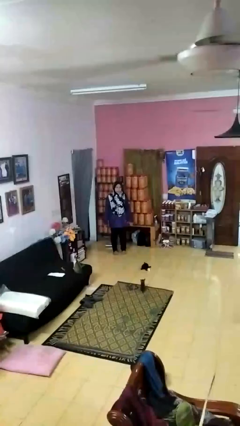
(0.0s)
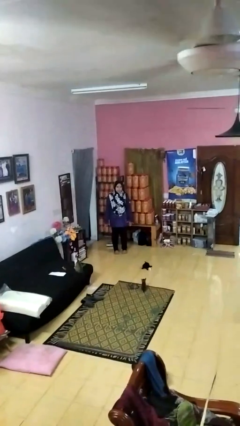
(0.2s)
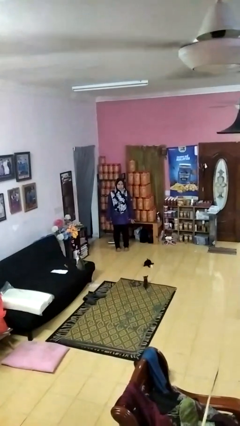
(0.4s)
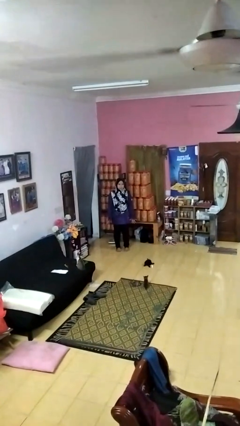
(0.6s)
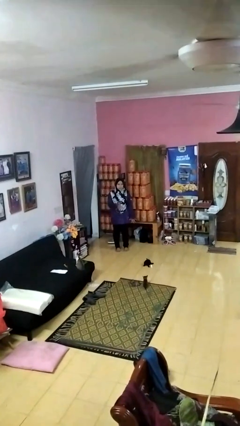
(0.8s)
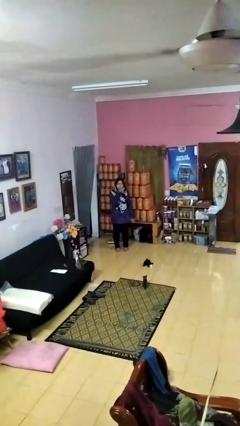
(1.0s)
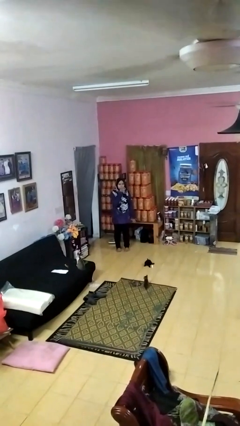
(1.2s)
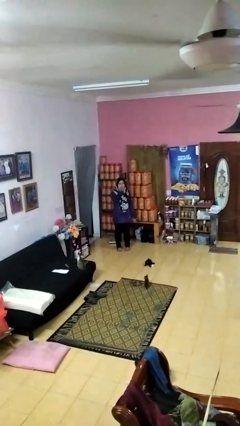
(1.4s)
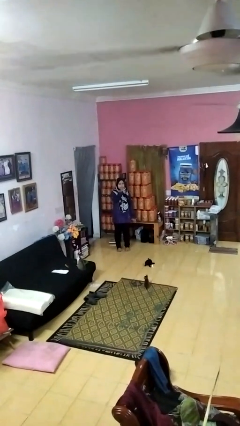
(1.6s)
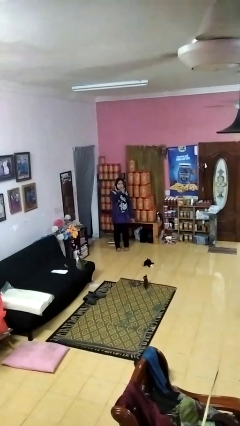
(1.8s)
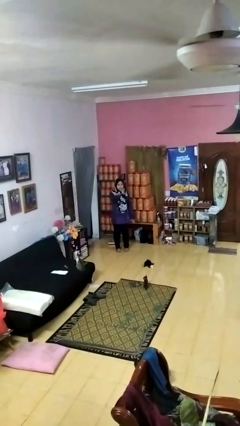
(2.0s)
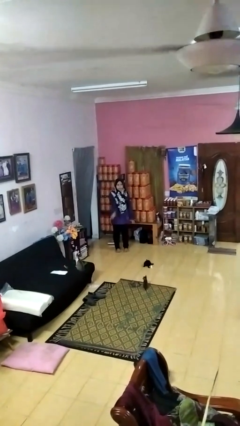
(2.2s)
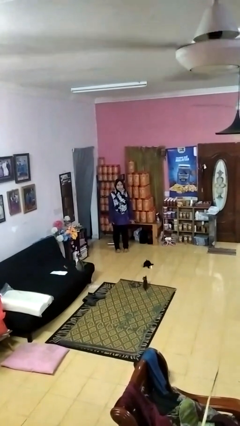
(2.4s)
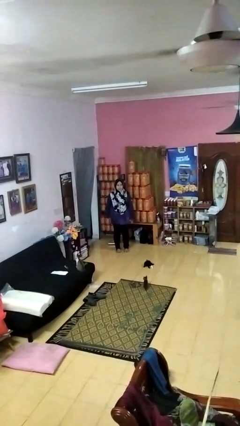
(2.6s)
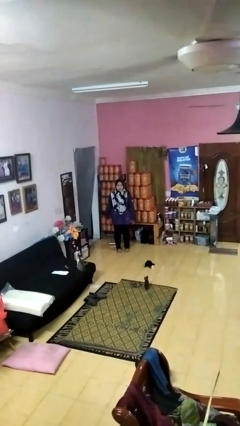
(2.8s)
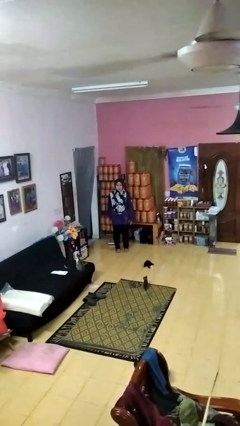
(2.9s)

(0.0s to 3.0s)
person gestures blow kiss

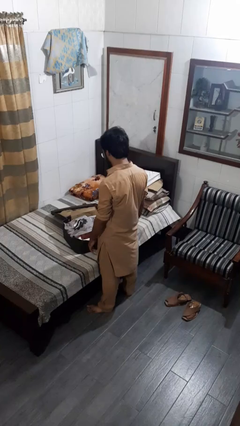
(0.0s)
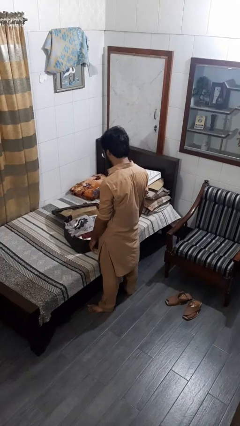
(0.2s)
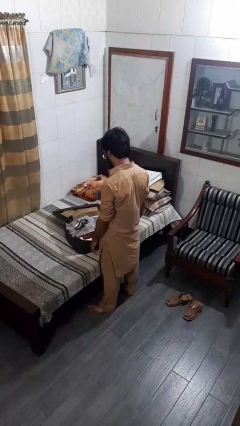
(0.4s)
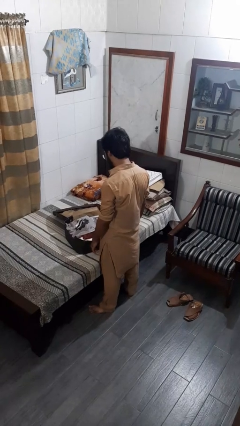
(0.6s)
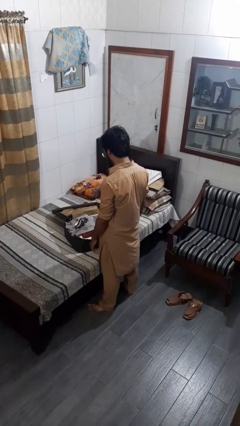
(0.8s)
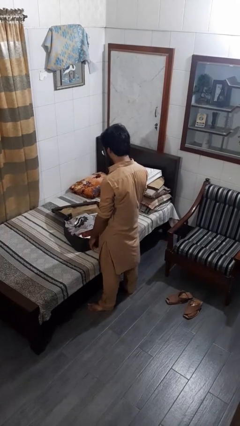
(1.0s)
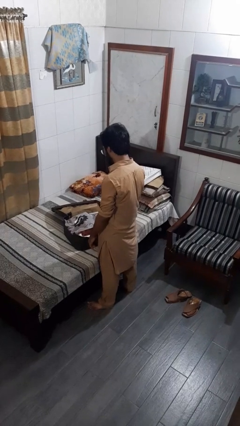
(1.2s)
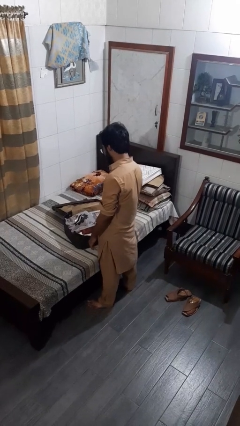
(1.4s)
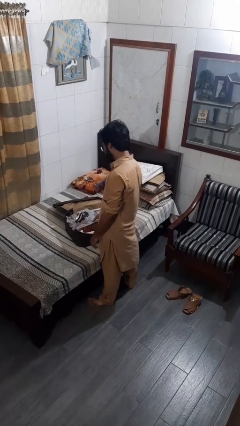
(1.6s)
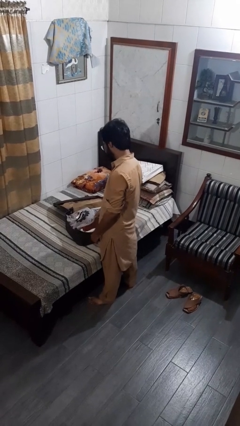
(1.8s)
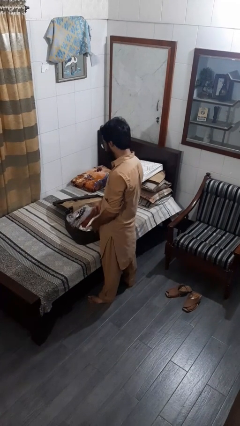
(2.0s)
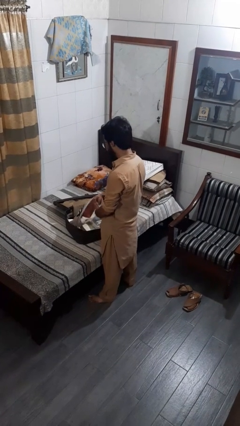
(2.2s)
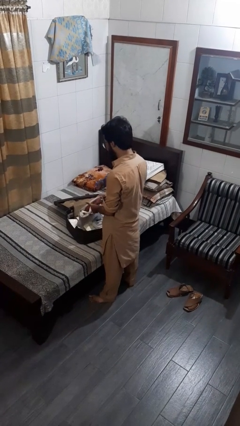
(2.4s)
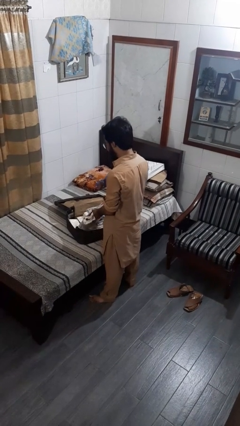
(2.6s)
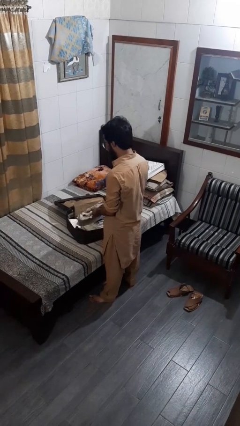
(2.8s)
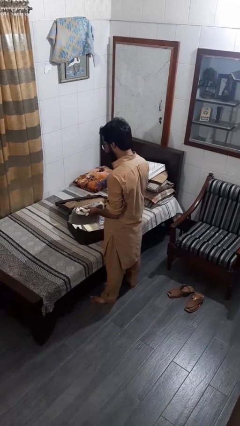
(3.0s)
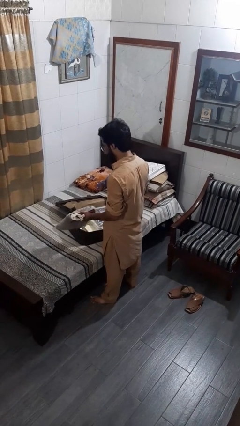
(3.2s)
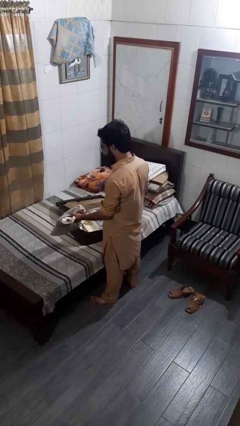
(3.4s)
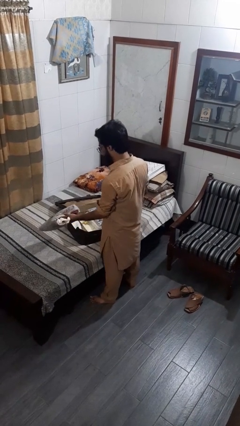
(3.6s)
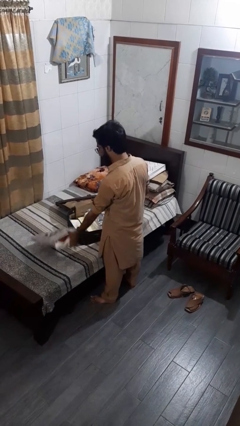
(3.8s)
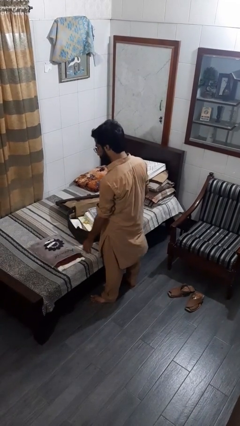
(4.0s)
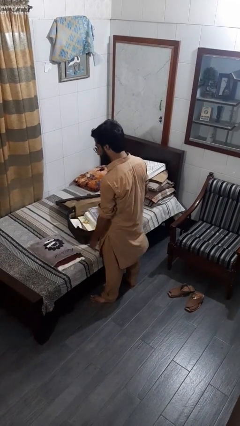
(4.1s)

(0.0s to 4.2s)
person unloads clothes from suitcase

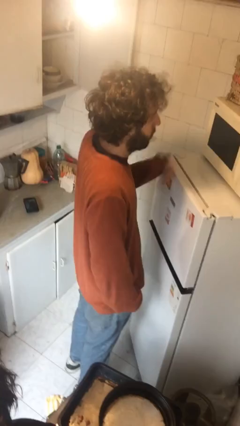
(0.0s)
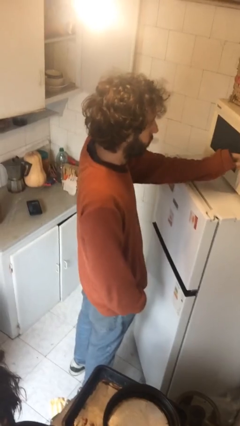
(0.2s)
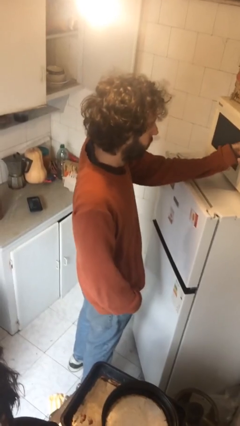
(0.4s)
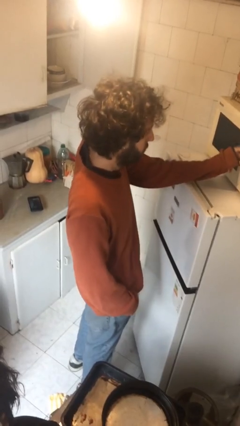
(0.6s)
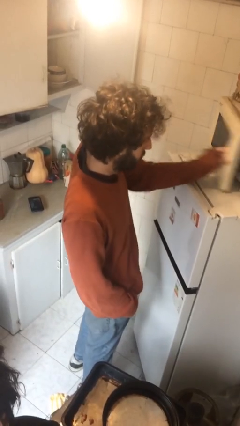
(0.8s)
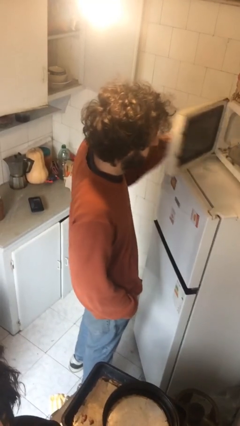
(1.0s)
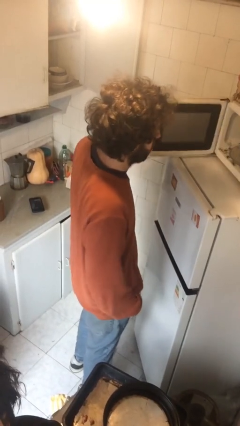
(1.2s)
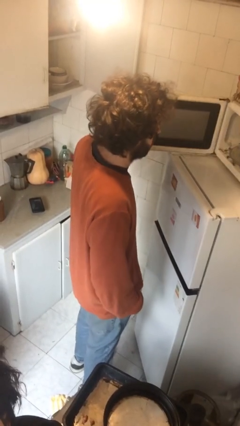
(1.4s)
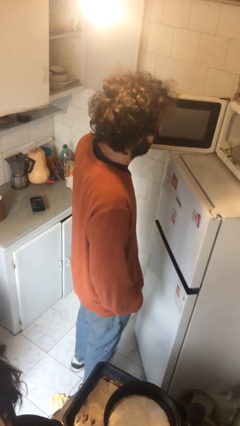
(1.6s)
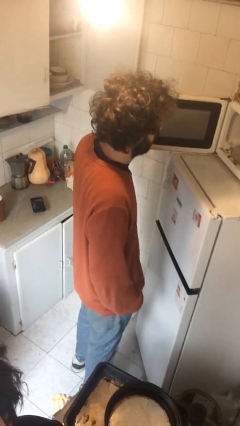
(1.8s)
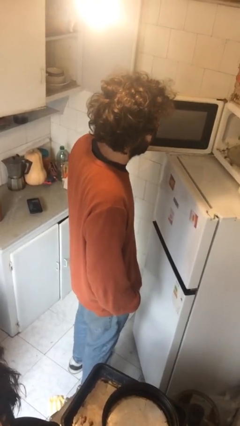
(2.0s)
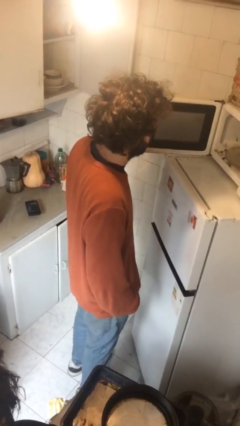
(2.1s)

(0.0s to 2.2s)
person opens microwave

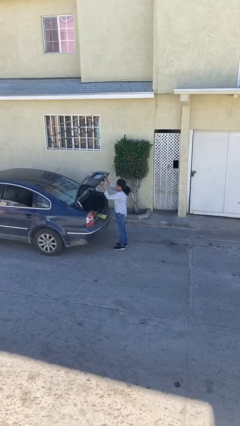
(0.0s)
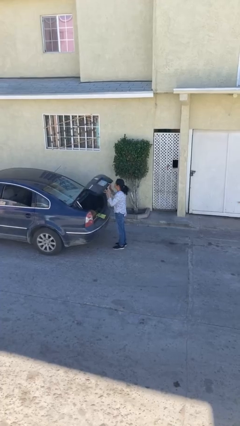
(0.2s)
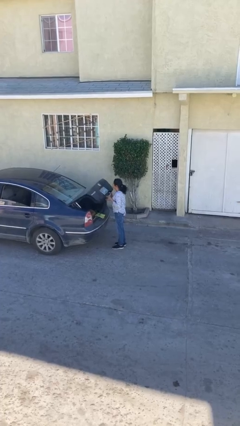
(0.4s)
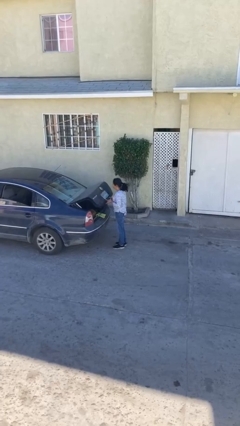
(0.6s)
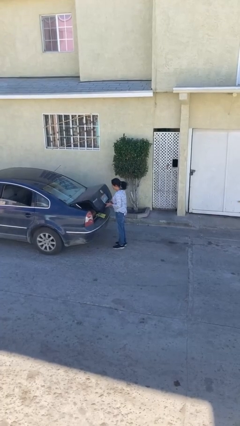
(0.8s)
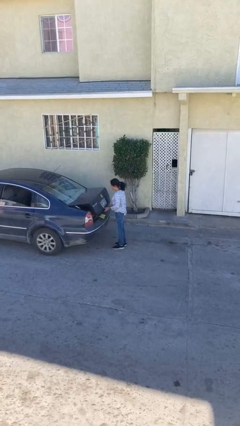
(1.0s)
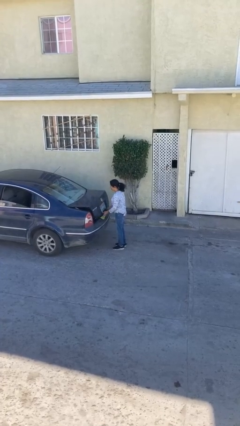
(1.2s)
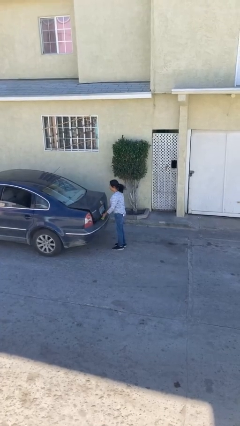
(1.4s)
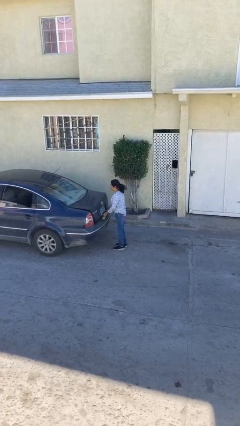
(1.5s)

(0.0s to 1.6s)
person closes car trunk

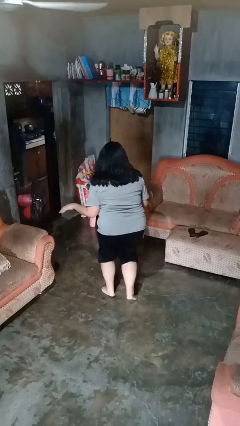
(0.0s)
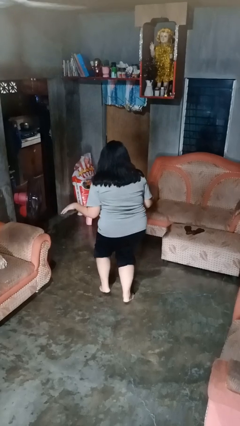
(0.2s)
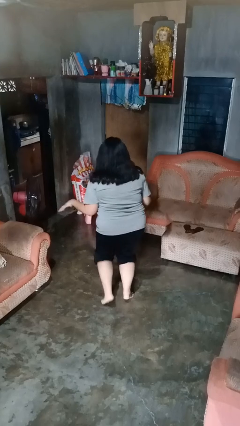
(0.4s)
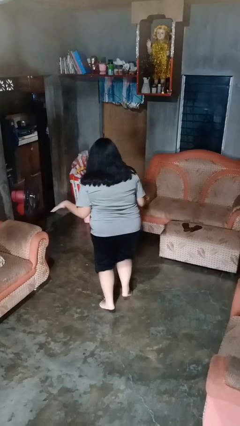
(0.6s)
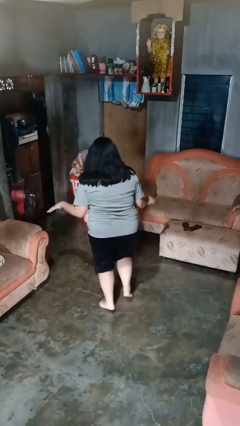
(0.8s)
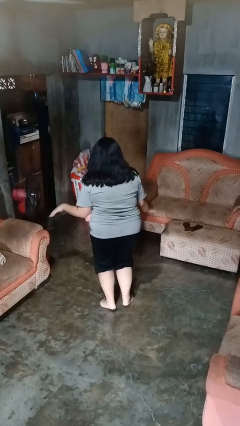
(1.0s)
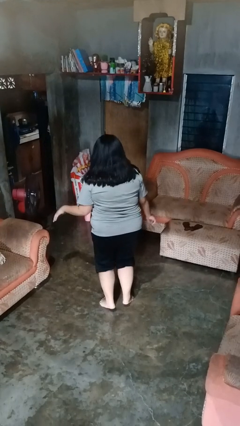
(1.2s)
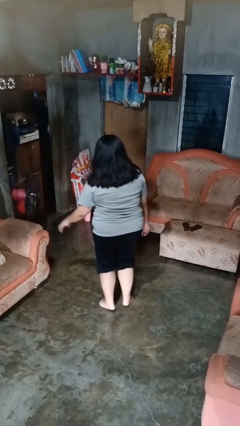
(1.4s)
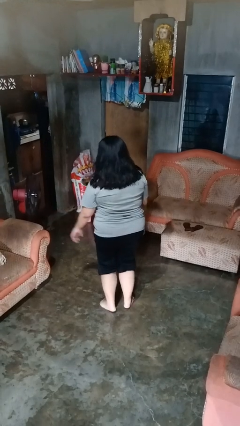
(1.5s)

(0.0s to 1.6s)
person walks tiptoe

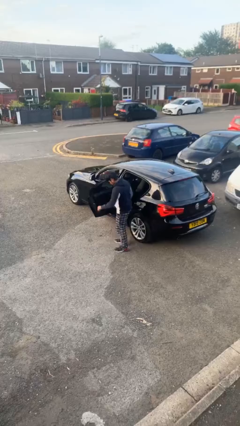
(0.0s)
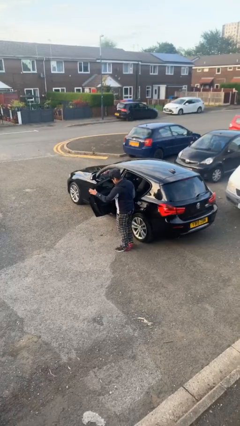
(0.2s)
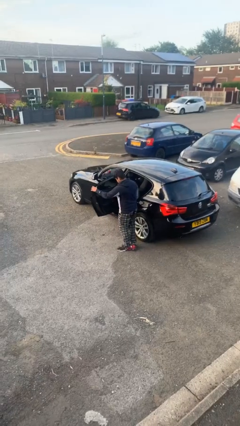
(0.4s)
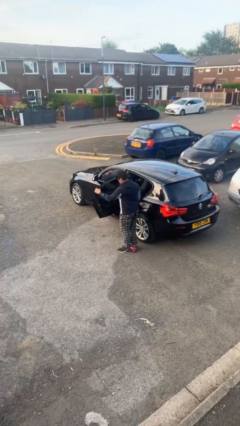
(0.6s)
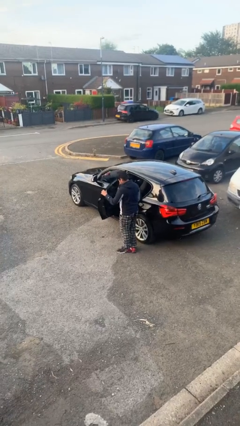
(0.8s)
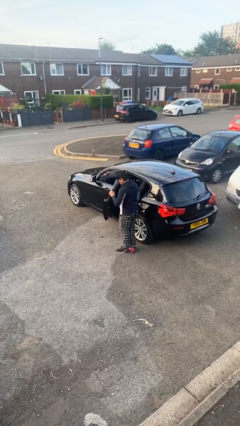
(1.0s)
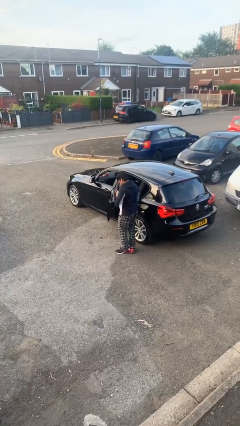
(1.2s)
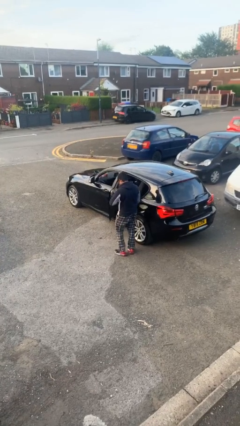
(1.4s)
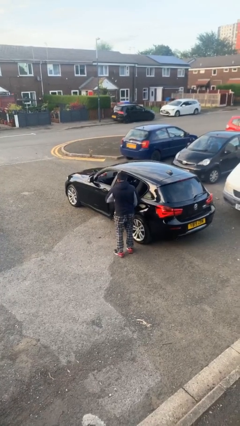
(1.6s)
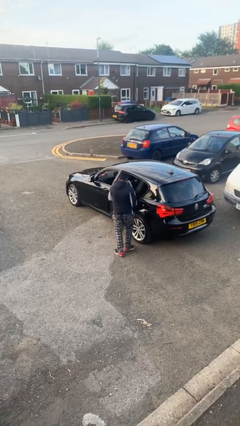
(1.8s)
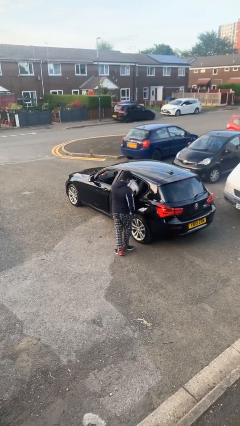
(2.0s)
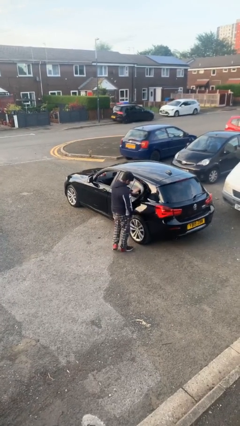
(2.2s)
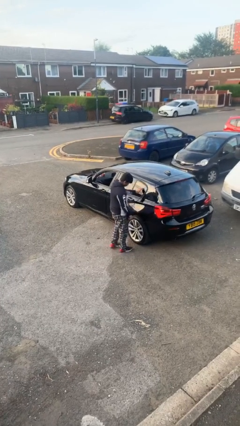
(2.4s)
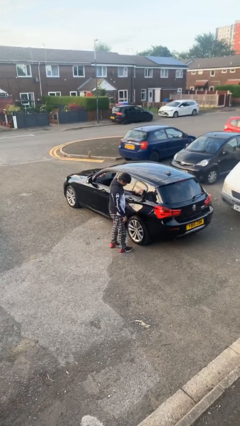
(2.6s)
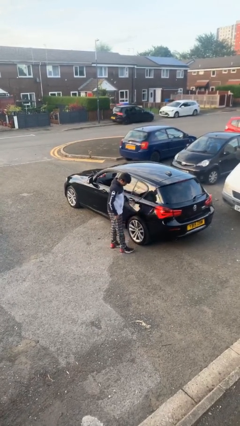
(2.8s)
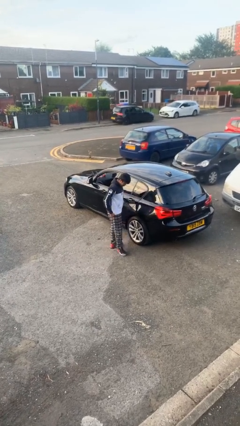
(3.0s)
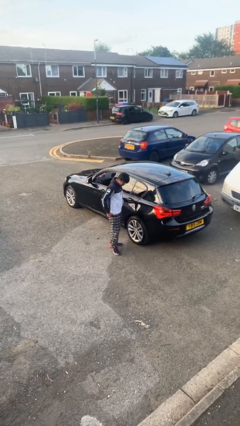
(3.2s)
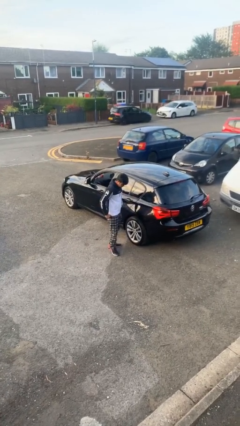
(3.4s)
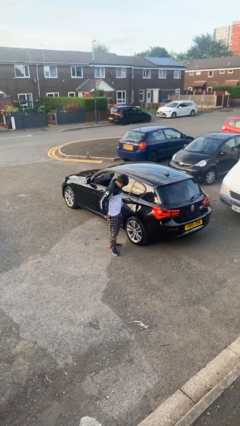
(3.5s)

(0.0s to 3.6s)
person closes car door

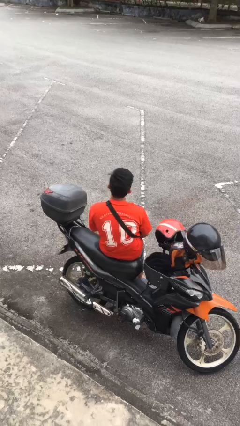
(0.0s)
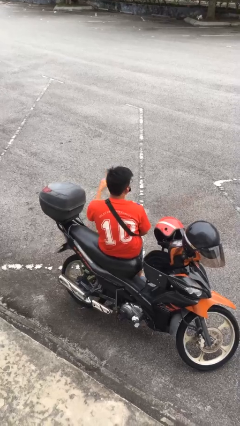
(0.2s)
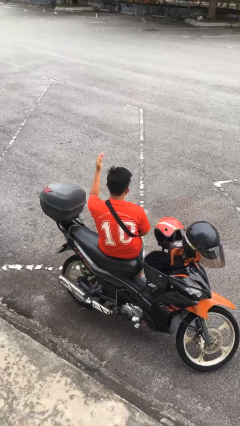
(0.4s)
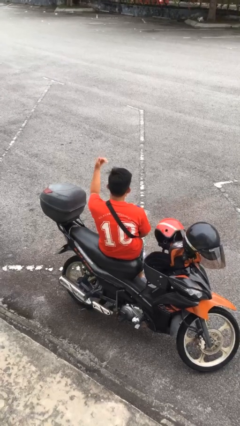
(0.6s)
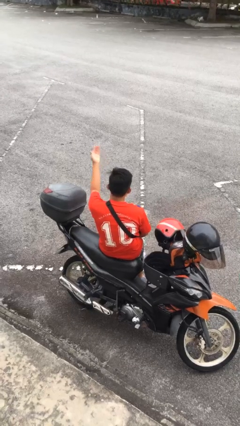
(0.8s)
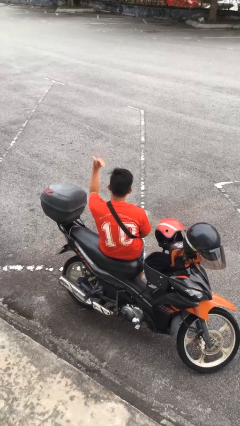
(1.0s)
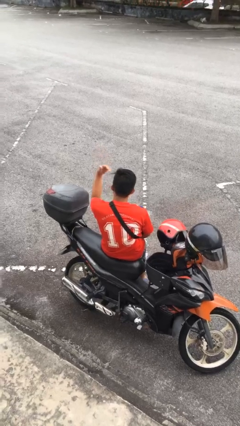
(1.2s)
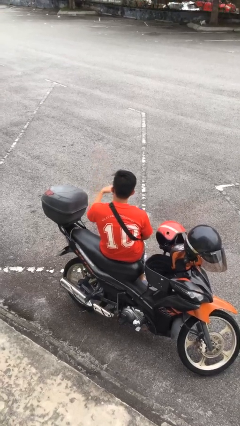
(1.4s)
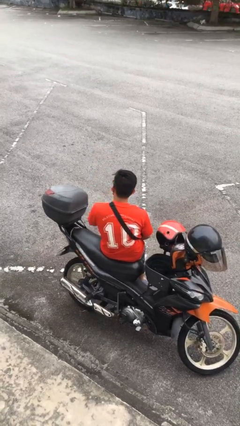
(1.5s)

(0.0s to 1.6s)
person gestures come here
